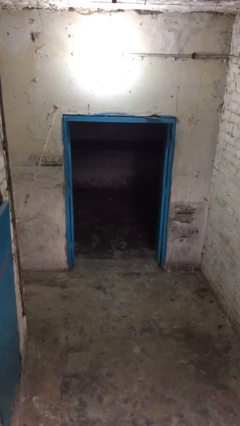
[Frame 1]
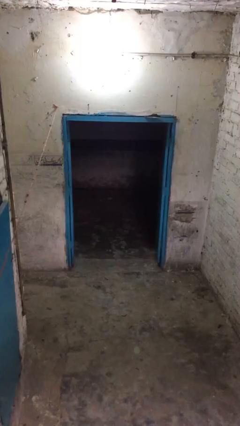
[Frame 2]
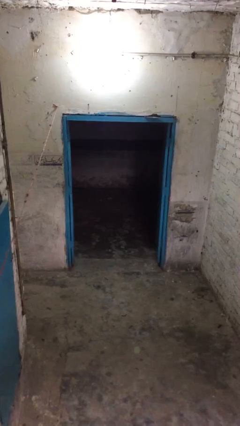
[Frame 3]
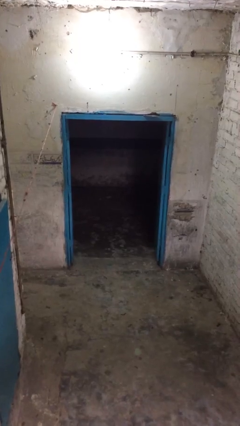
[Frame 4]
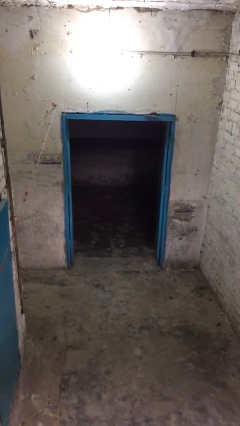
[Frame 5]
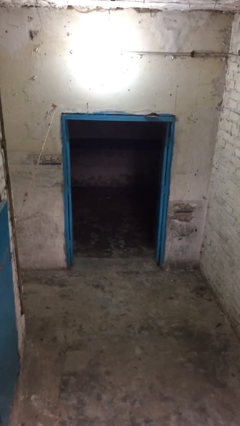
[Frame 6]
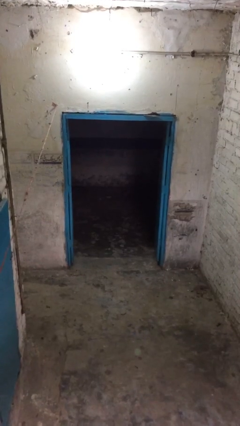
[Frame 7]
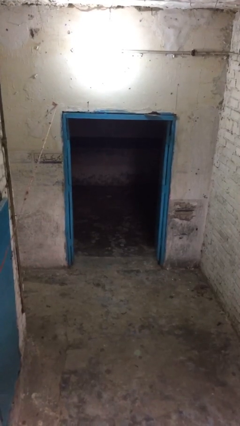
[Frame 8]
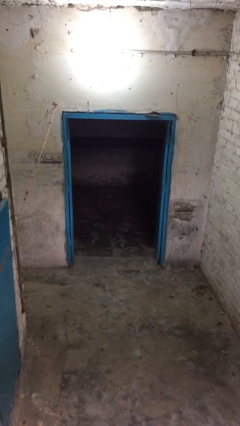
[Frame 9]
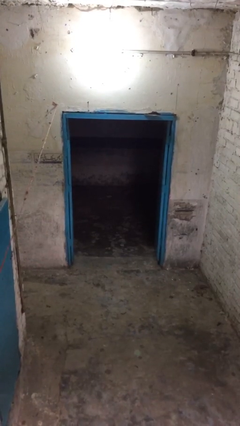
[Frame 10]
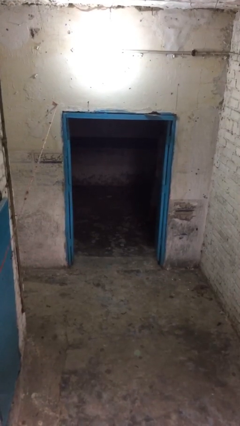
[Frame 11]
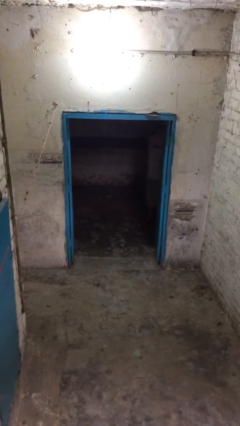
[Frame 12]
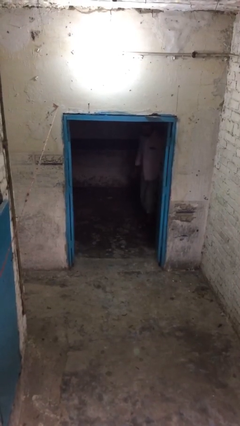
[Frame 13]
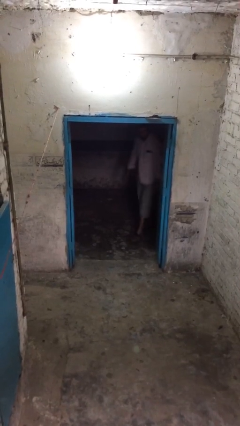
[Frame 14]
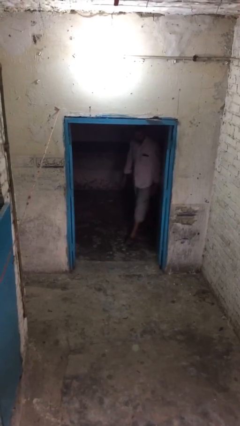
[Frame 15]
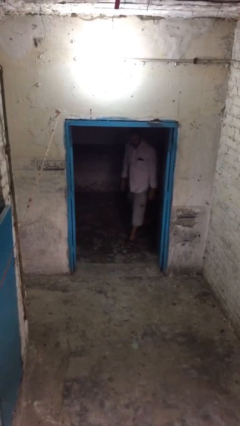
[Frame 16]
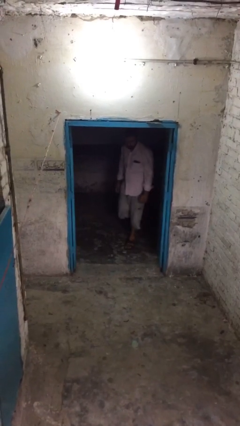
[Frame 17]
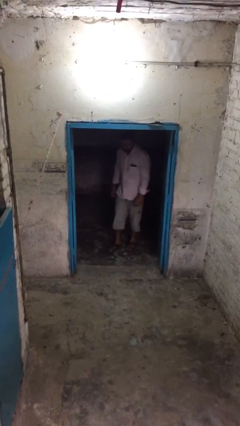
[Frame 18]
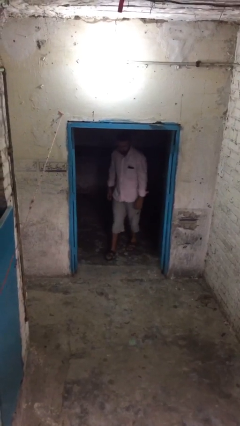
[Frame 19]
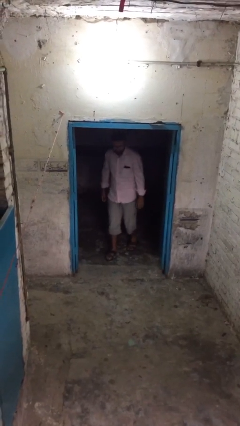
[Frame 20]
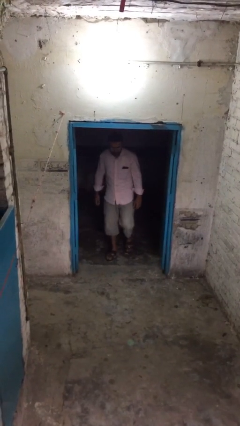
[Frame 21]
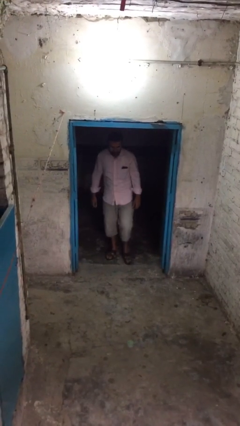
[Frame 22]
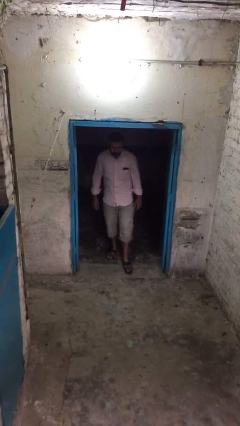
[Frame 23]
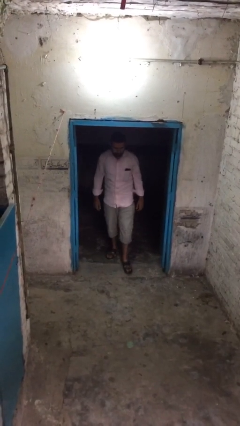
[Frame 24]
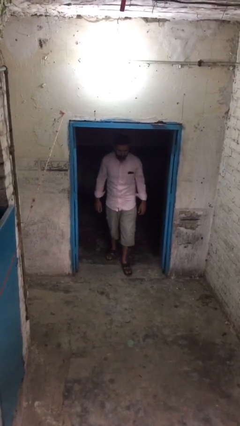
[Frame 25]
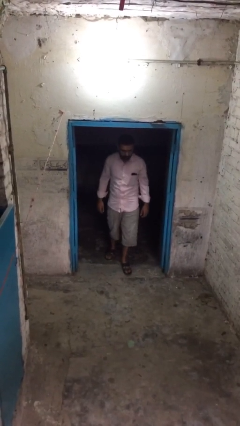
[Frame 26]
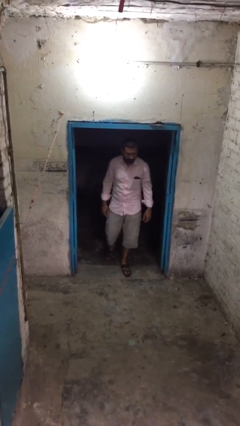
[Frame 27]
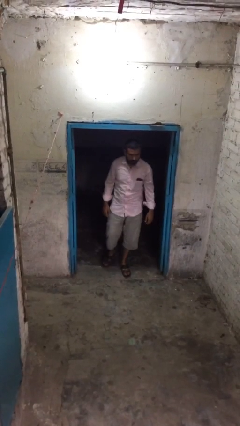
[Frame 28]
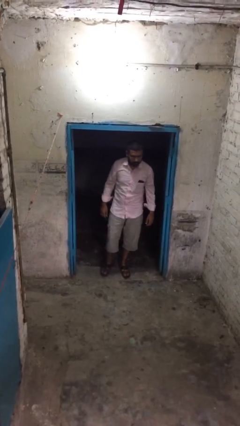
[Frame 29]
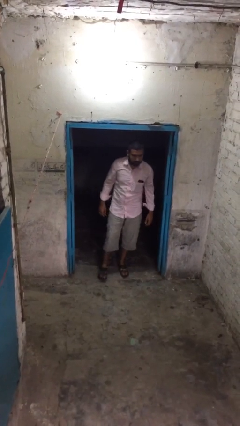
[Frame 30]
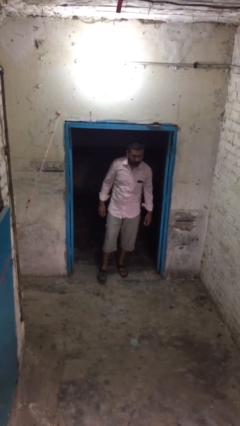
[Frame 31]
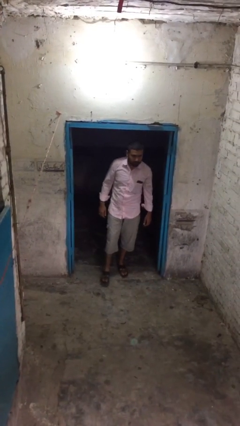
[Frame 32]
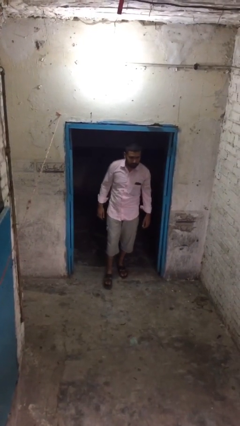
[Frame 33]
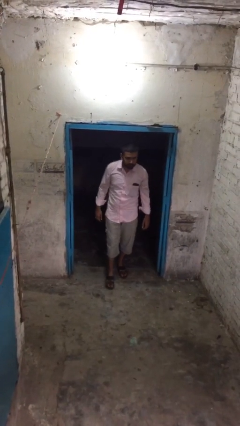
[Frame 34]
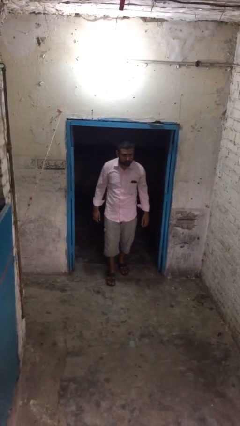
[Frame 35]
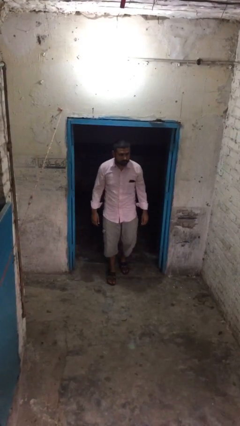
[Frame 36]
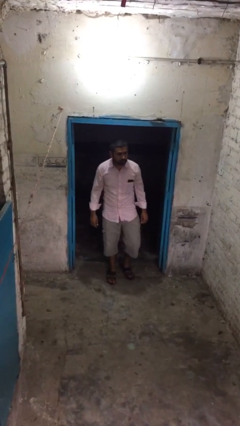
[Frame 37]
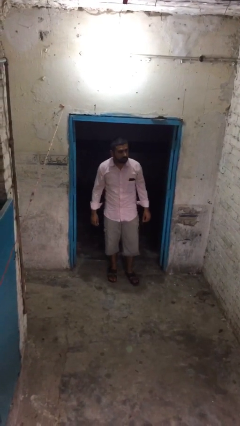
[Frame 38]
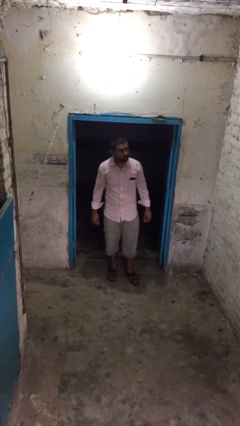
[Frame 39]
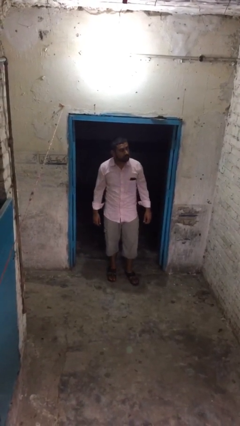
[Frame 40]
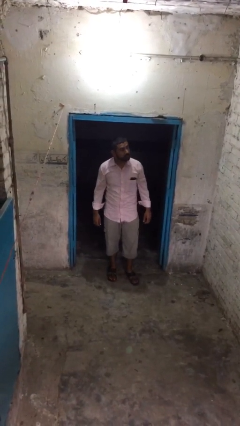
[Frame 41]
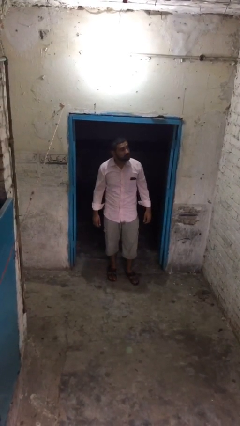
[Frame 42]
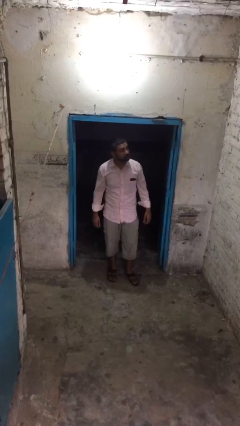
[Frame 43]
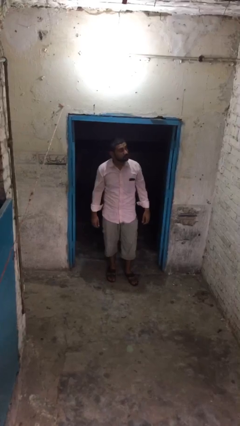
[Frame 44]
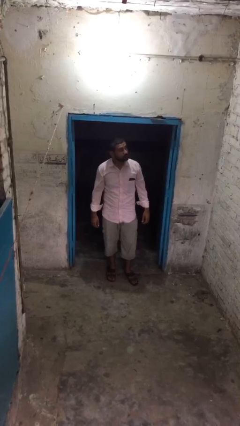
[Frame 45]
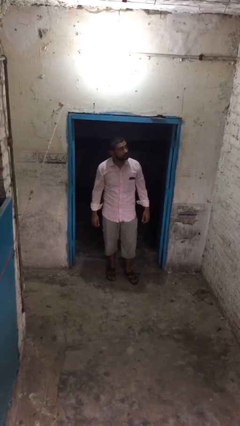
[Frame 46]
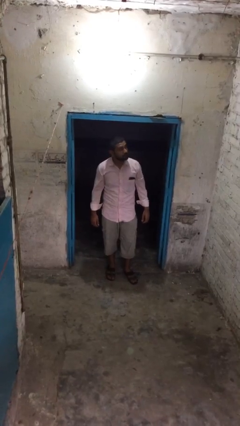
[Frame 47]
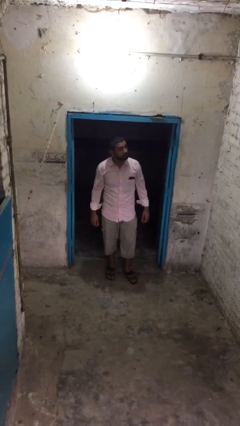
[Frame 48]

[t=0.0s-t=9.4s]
person enters scene through structure

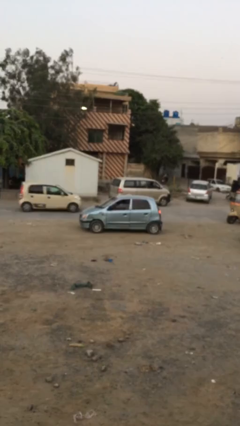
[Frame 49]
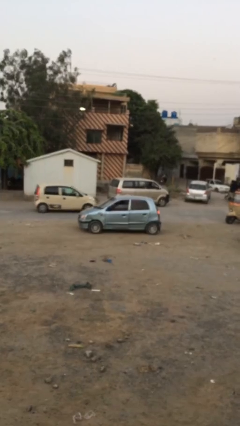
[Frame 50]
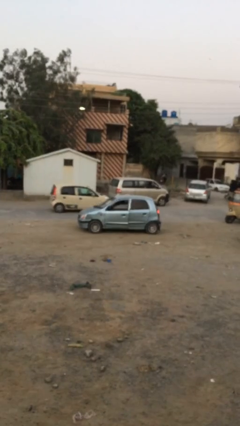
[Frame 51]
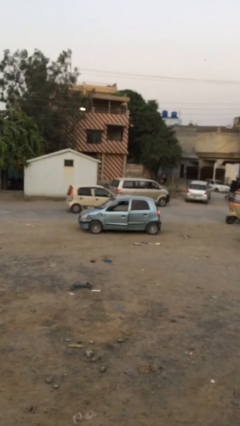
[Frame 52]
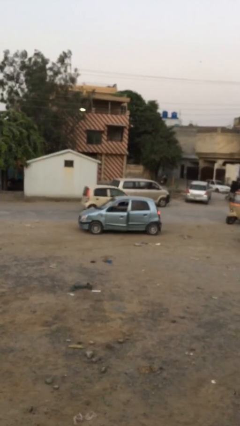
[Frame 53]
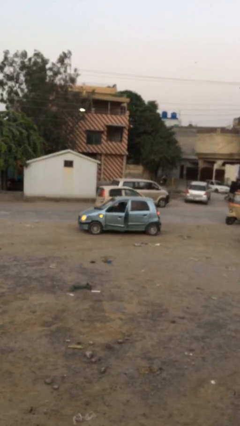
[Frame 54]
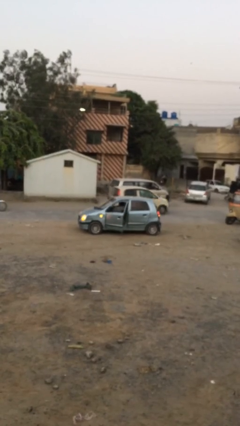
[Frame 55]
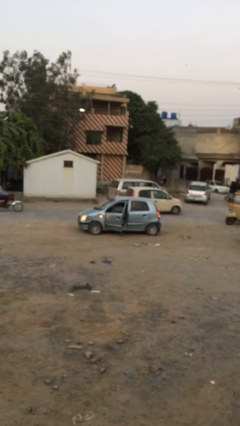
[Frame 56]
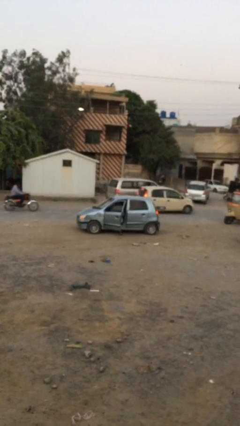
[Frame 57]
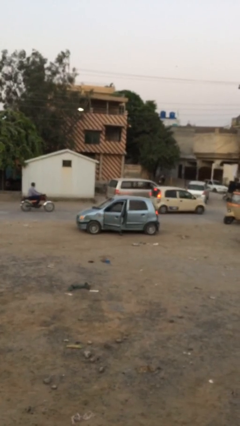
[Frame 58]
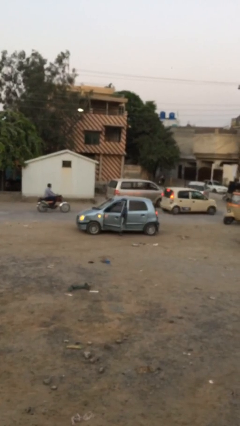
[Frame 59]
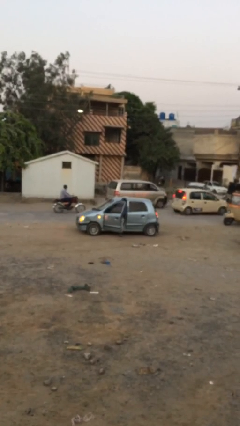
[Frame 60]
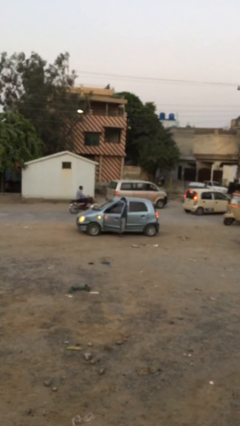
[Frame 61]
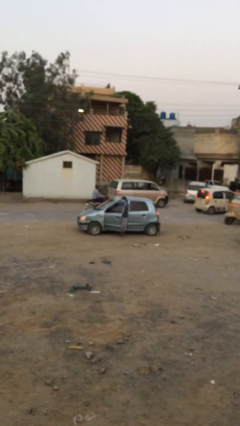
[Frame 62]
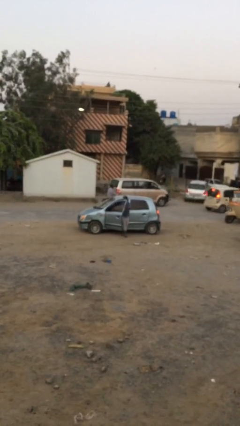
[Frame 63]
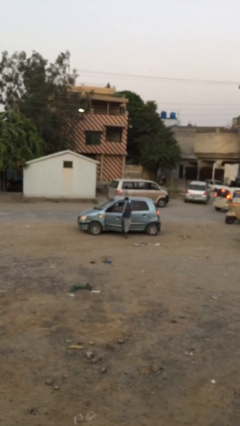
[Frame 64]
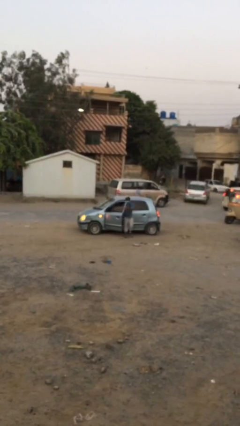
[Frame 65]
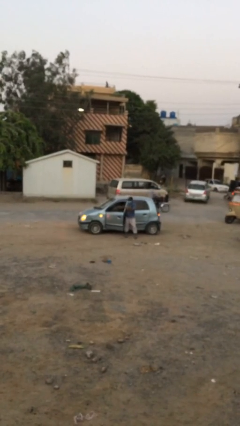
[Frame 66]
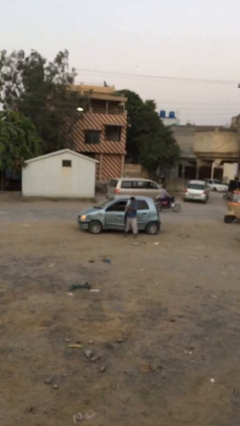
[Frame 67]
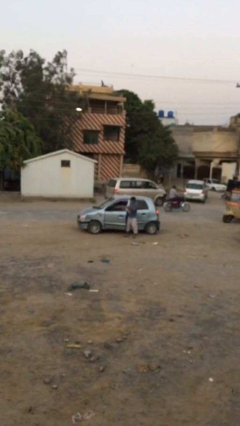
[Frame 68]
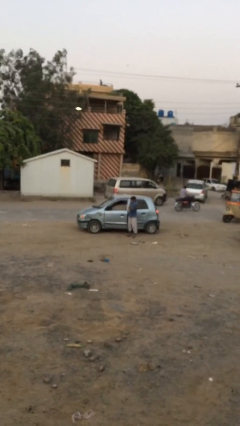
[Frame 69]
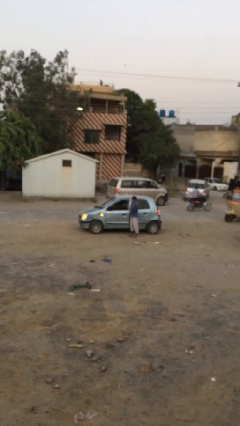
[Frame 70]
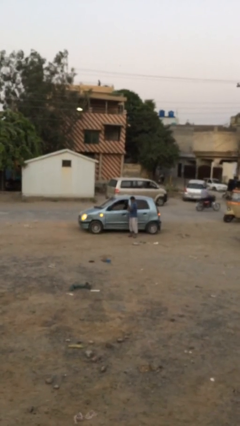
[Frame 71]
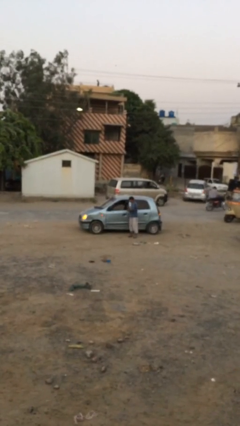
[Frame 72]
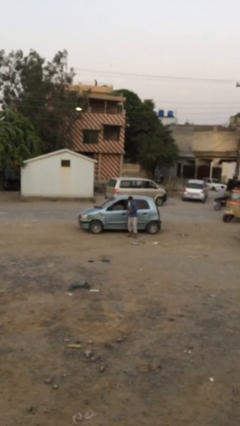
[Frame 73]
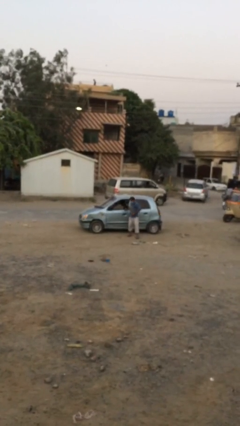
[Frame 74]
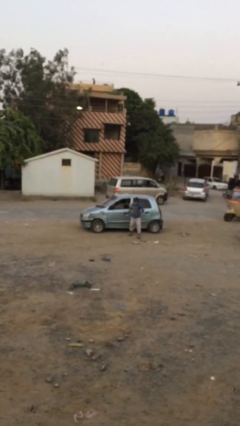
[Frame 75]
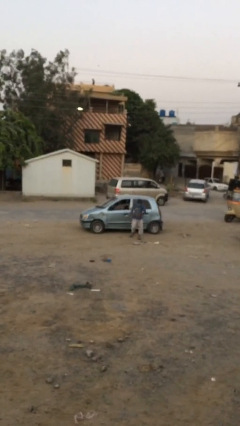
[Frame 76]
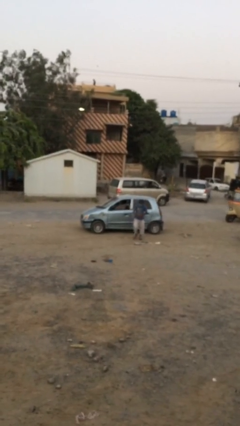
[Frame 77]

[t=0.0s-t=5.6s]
car drops off person

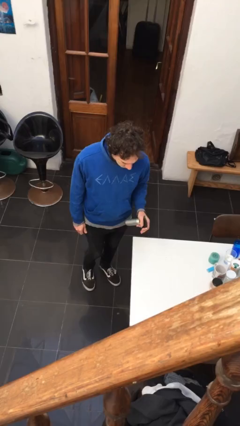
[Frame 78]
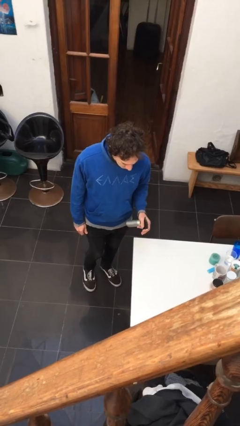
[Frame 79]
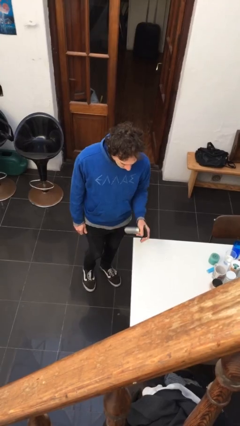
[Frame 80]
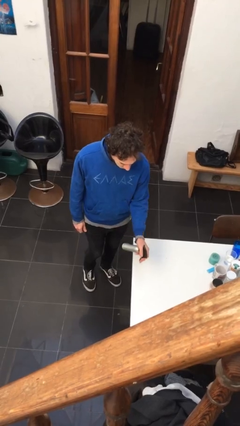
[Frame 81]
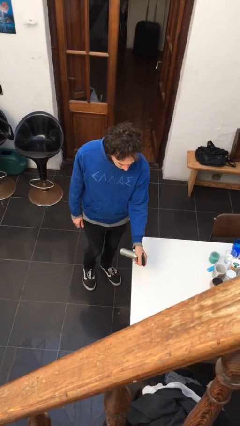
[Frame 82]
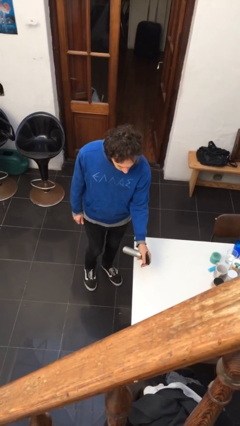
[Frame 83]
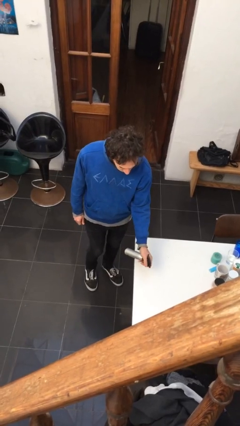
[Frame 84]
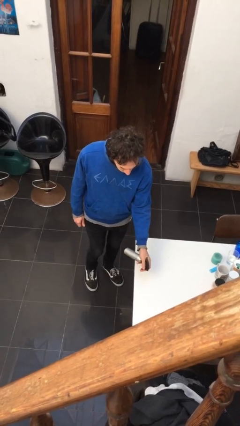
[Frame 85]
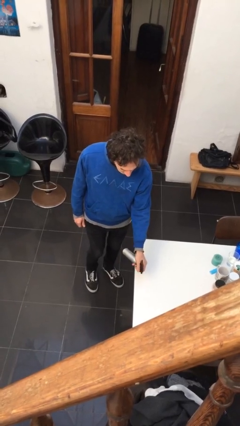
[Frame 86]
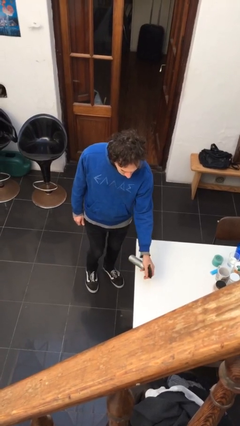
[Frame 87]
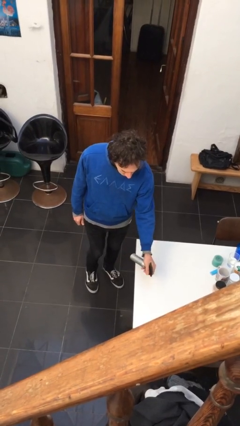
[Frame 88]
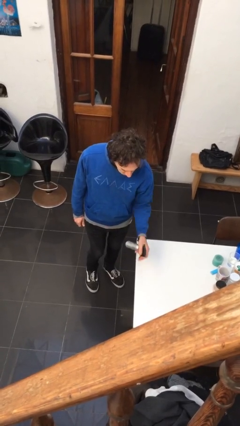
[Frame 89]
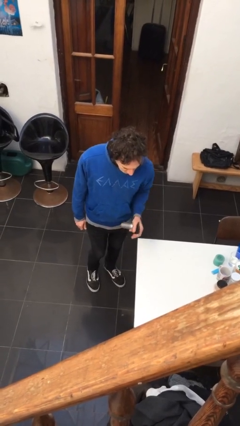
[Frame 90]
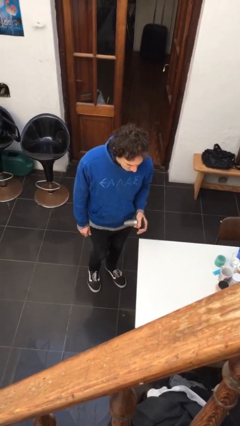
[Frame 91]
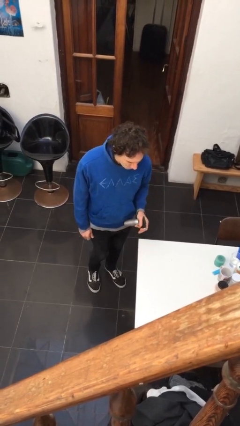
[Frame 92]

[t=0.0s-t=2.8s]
person sprays from bottle

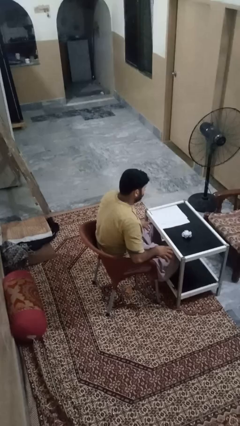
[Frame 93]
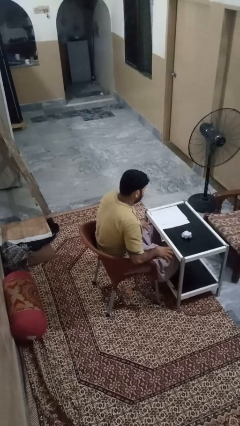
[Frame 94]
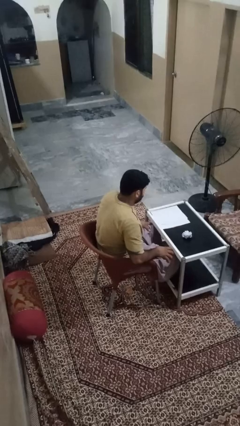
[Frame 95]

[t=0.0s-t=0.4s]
person crumples paper
